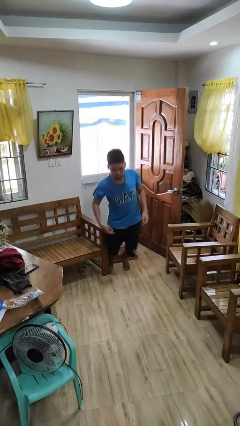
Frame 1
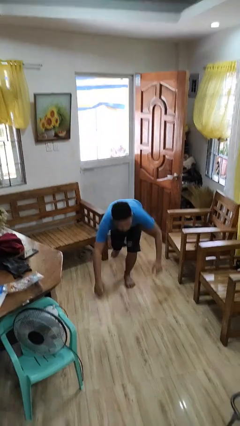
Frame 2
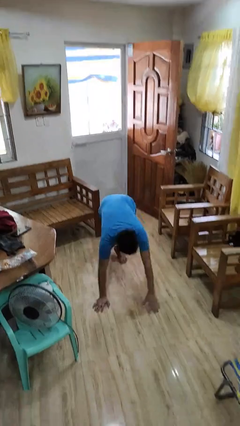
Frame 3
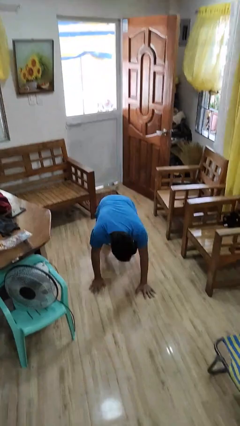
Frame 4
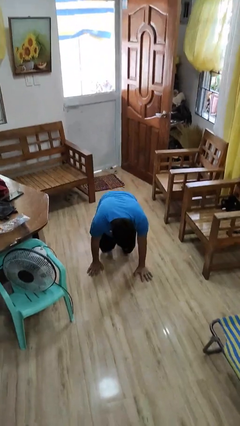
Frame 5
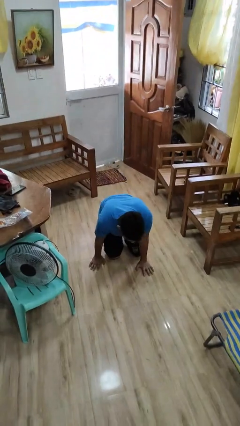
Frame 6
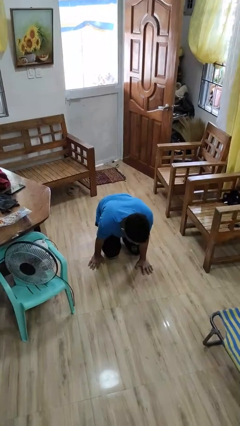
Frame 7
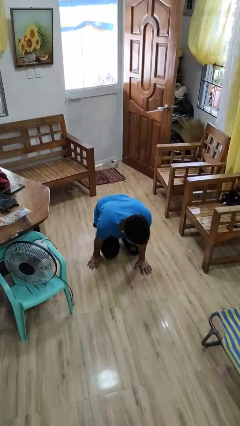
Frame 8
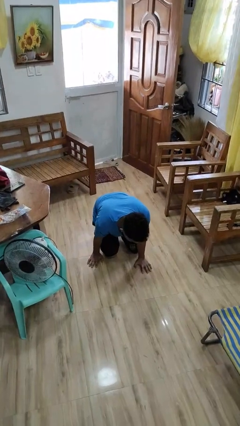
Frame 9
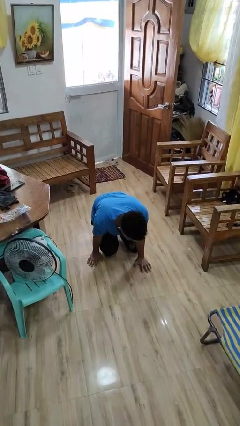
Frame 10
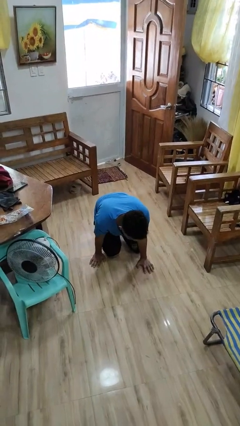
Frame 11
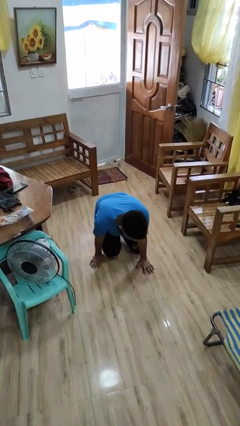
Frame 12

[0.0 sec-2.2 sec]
person trips on object on floor

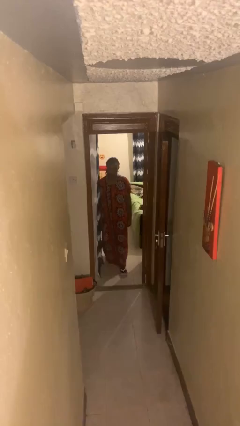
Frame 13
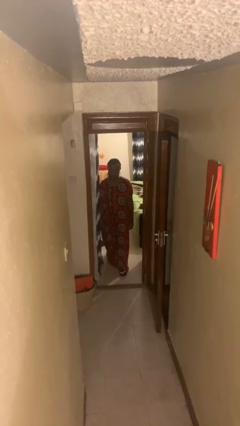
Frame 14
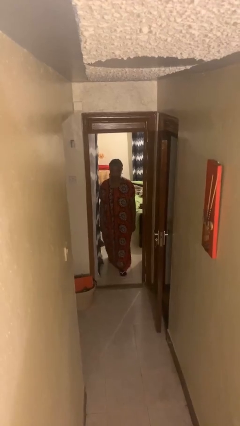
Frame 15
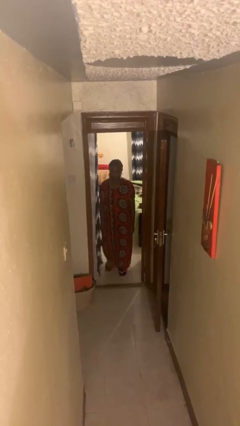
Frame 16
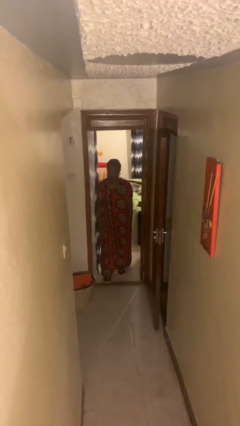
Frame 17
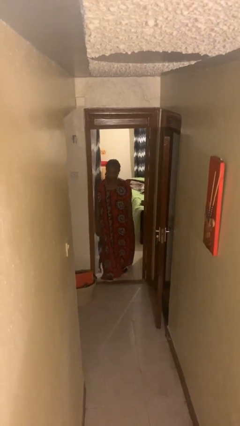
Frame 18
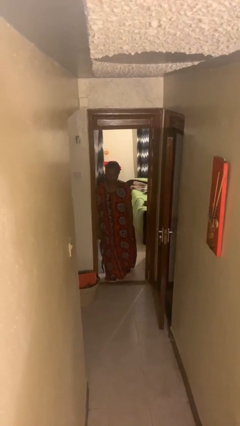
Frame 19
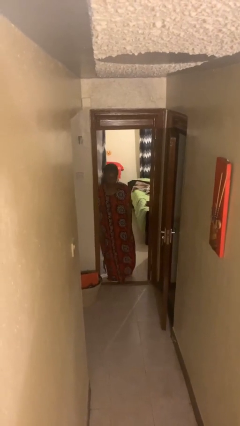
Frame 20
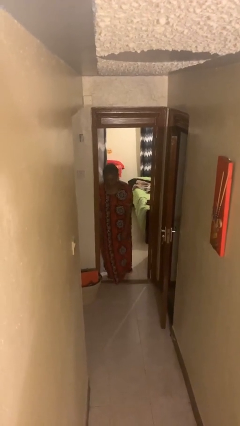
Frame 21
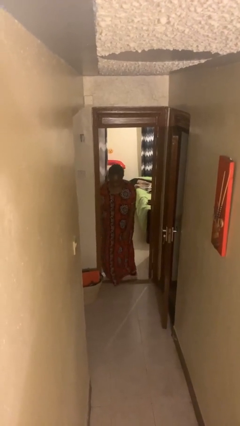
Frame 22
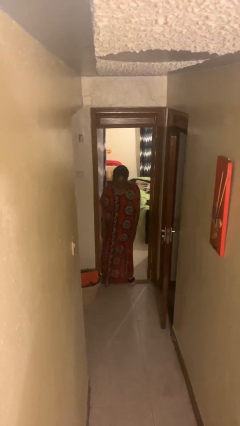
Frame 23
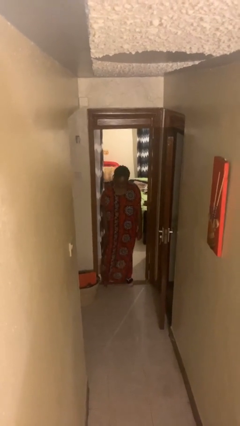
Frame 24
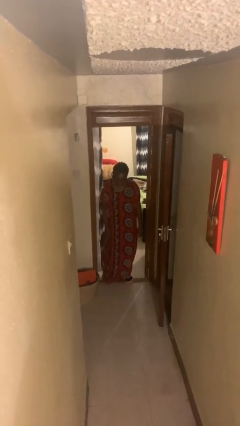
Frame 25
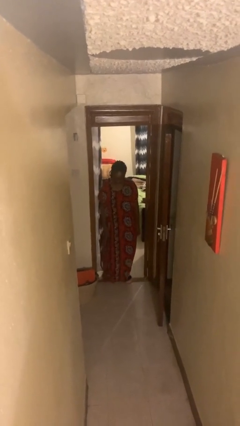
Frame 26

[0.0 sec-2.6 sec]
person bumps into wall

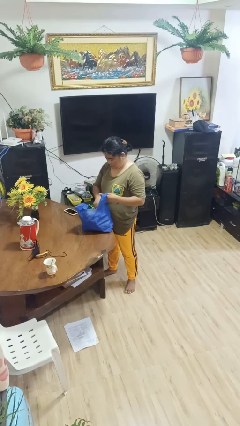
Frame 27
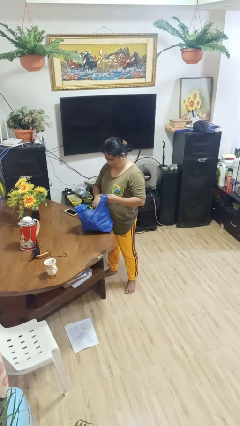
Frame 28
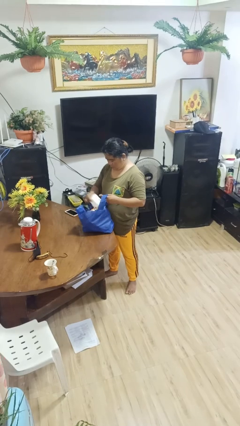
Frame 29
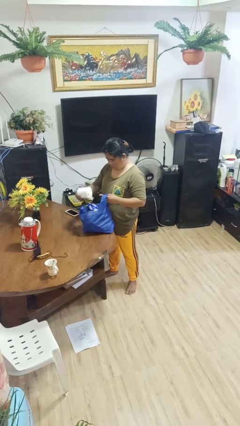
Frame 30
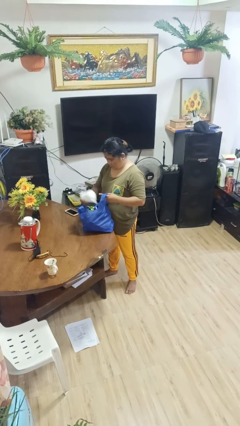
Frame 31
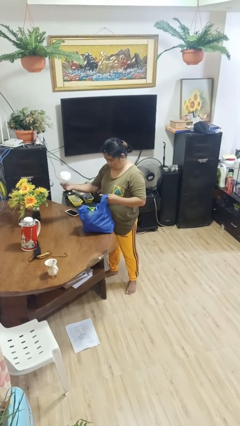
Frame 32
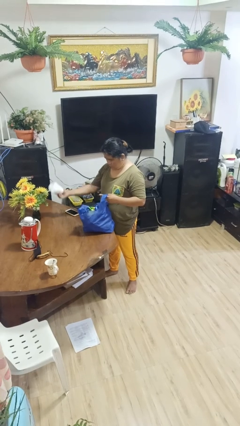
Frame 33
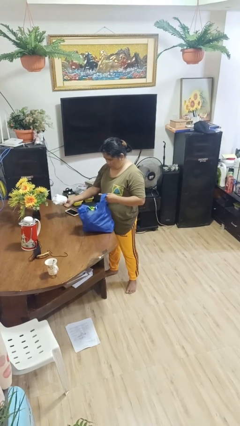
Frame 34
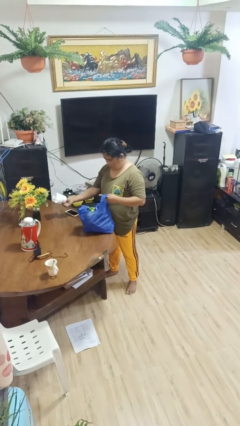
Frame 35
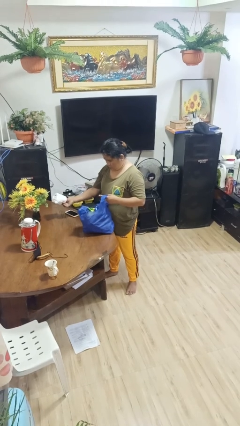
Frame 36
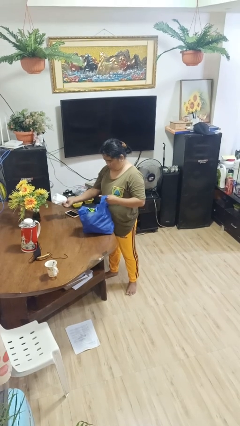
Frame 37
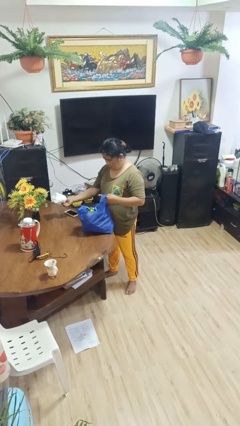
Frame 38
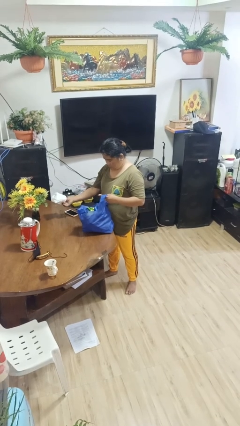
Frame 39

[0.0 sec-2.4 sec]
person takes object from bag

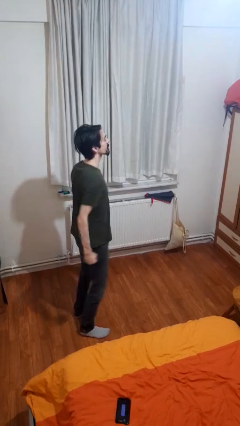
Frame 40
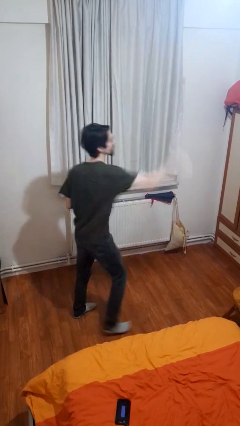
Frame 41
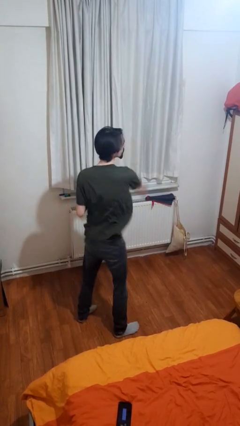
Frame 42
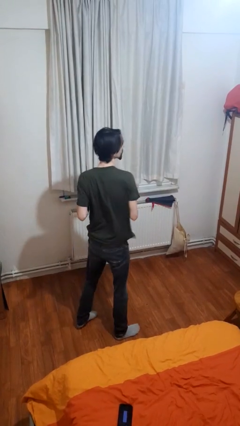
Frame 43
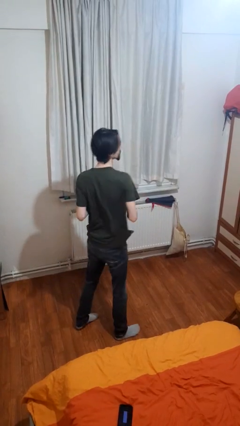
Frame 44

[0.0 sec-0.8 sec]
person punches

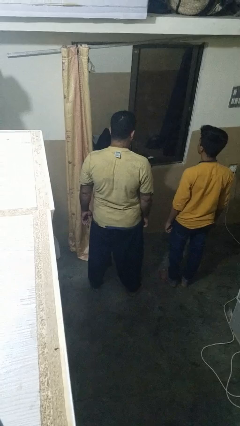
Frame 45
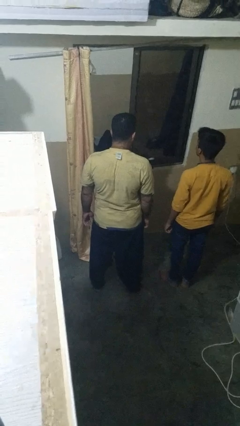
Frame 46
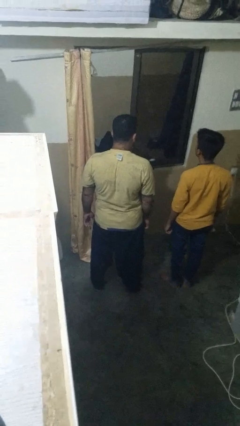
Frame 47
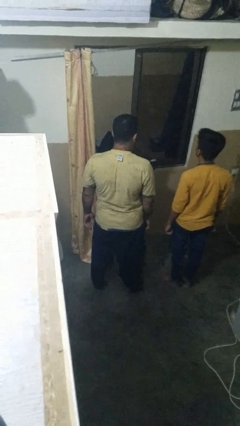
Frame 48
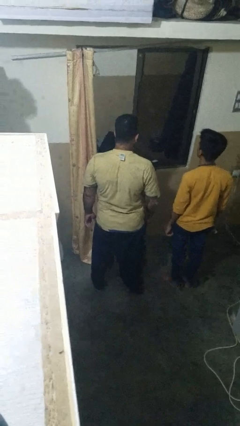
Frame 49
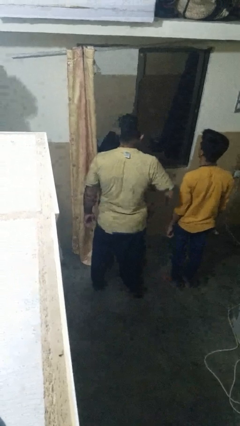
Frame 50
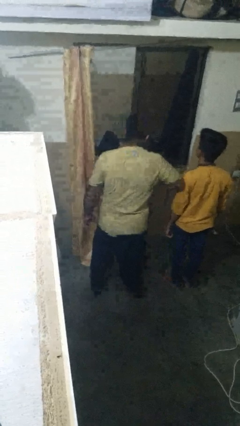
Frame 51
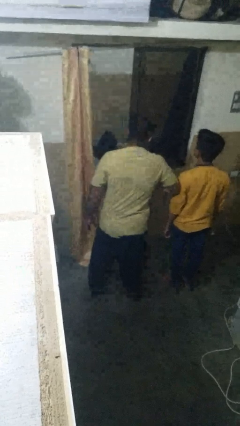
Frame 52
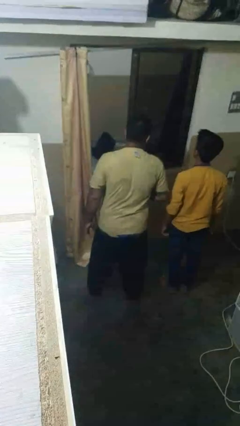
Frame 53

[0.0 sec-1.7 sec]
person nudges person with elbow

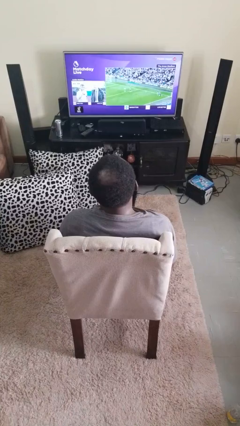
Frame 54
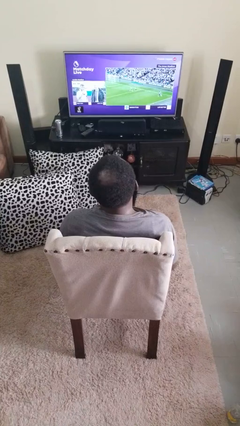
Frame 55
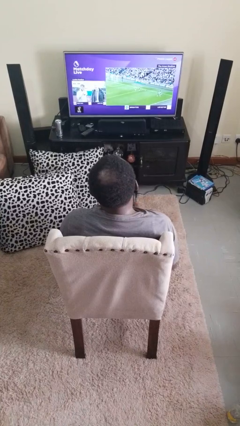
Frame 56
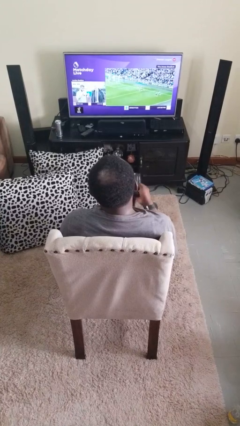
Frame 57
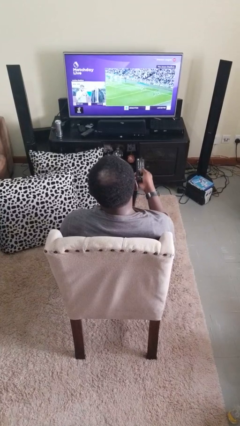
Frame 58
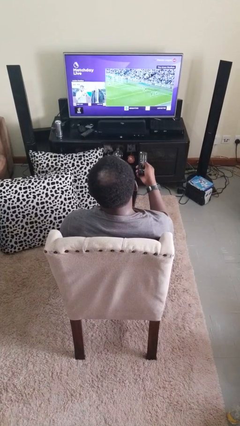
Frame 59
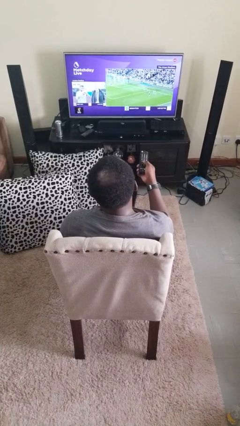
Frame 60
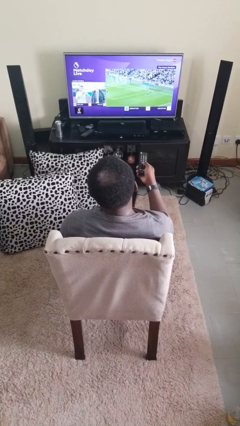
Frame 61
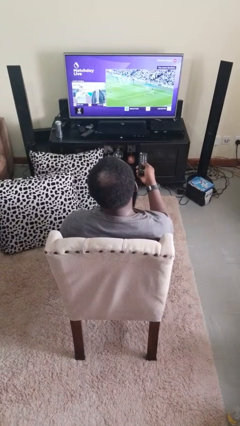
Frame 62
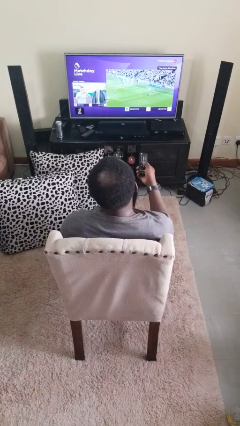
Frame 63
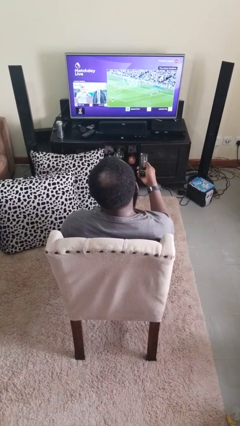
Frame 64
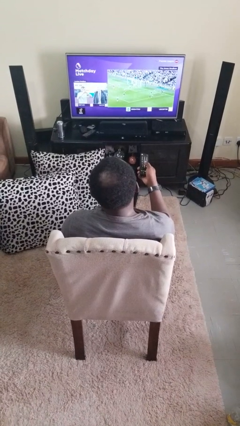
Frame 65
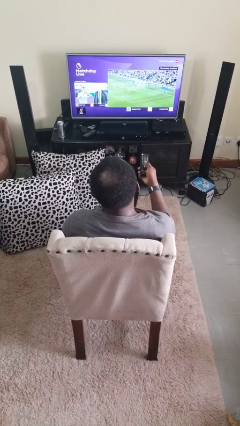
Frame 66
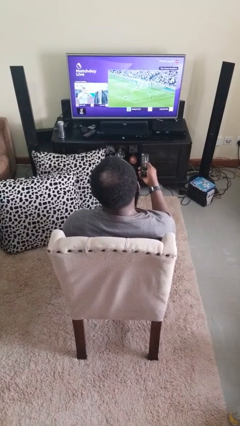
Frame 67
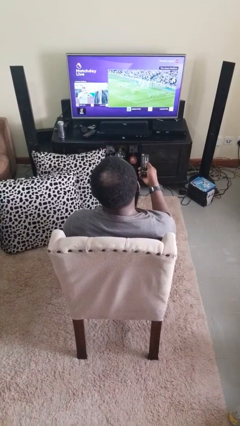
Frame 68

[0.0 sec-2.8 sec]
person uses television remote

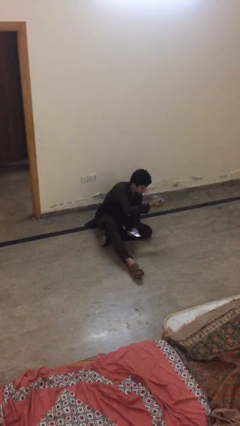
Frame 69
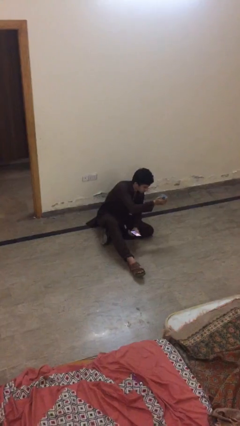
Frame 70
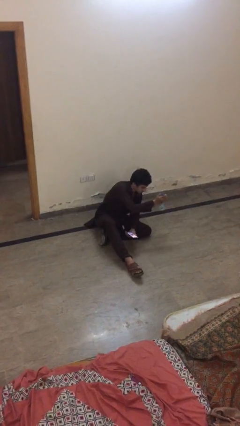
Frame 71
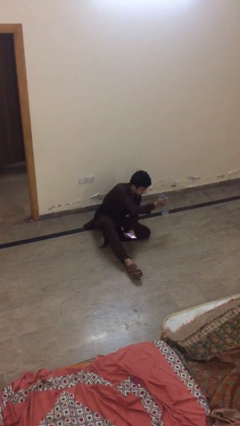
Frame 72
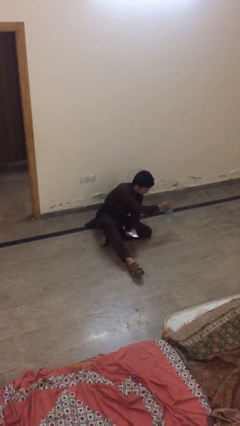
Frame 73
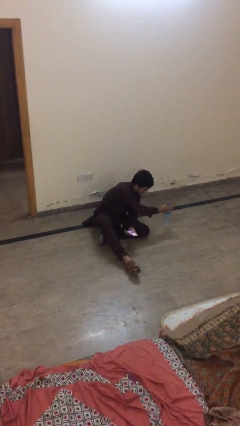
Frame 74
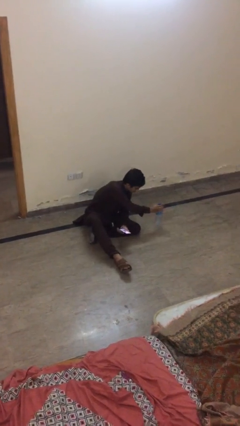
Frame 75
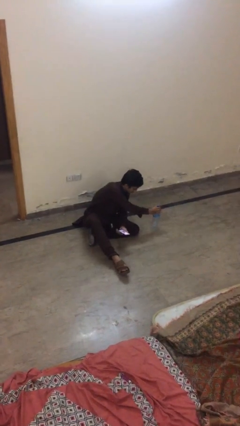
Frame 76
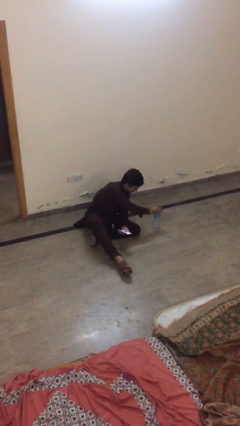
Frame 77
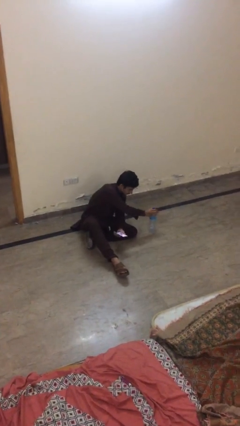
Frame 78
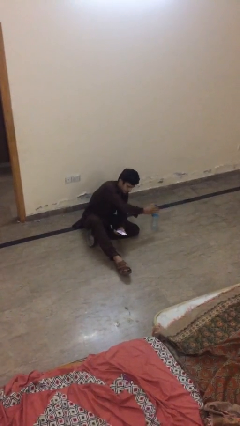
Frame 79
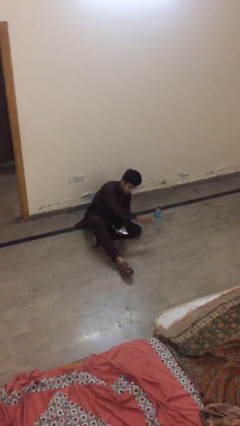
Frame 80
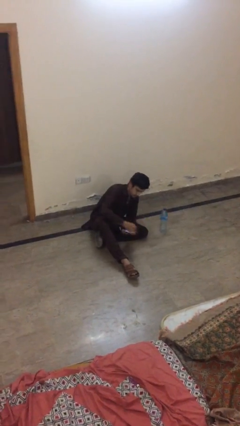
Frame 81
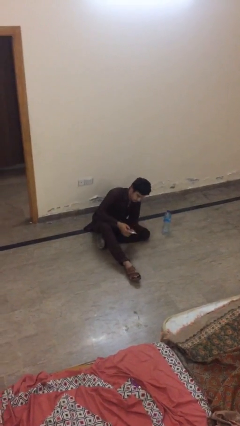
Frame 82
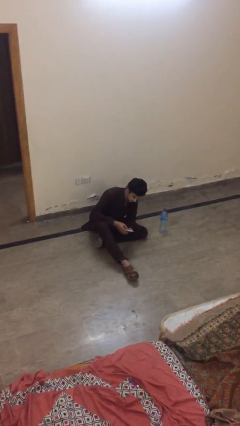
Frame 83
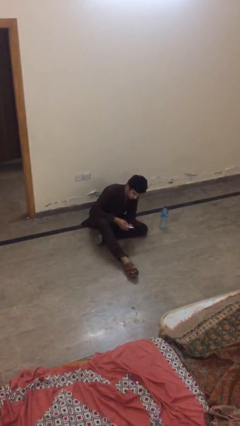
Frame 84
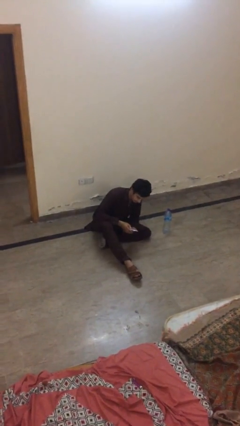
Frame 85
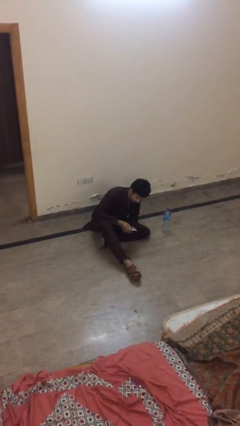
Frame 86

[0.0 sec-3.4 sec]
person puts down object on floor

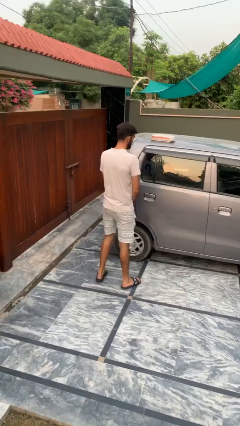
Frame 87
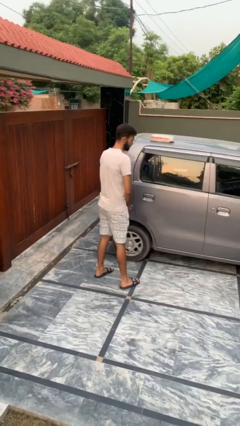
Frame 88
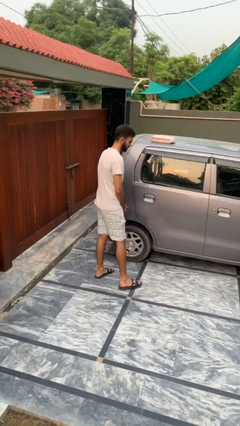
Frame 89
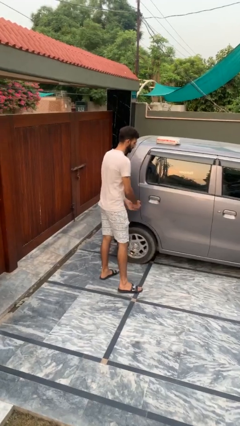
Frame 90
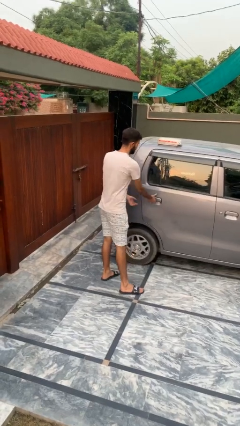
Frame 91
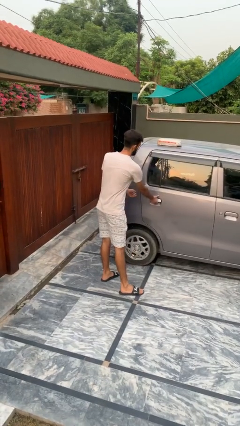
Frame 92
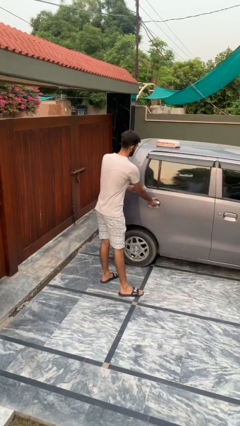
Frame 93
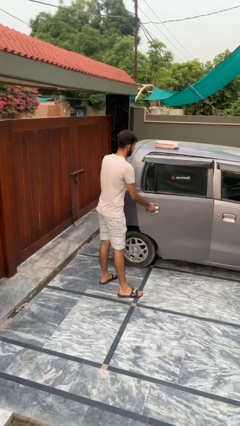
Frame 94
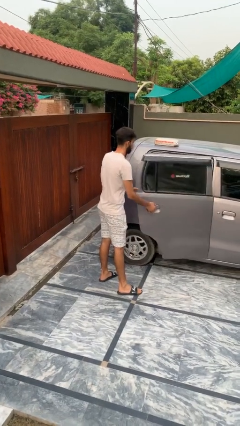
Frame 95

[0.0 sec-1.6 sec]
person opens car door
